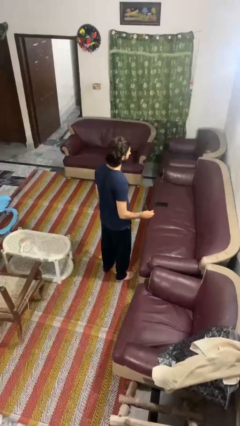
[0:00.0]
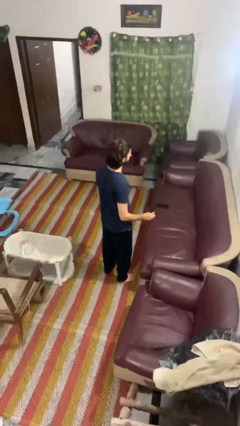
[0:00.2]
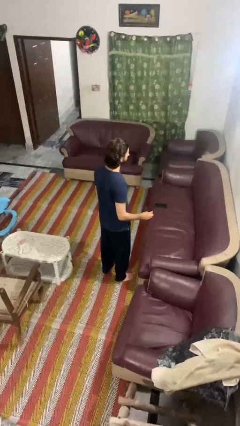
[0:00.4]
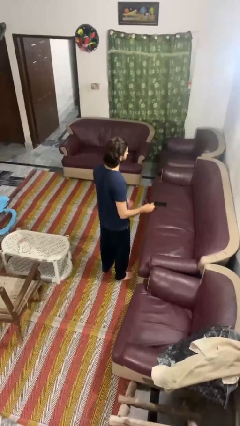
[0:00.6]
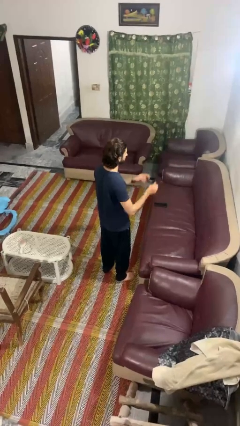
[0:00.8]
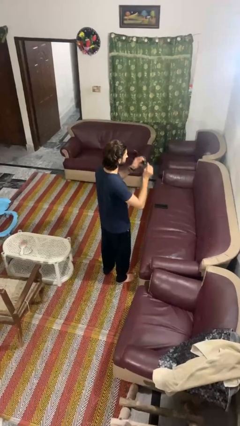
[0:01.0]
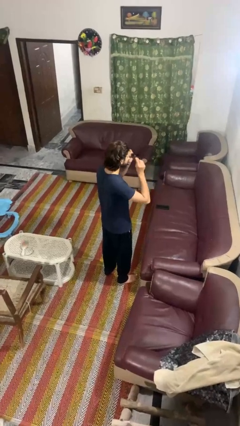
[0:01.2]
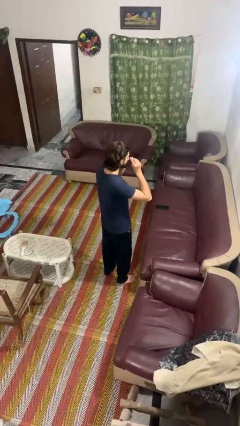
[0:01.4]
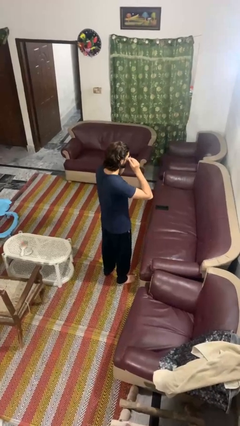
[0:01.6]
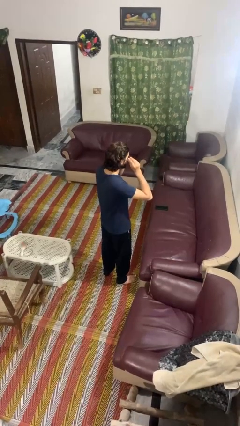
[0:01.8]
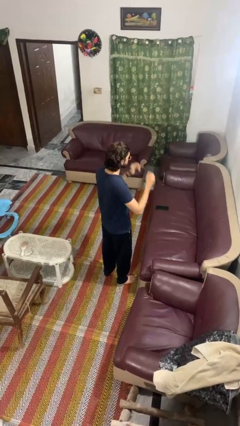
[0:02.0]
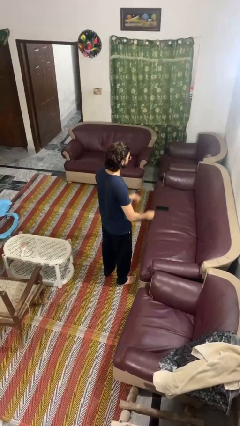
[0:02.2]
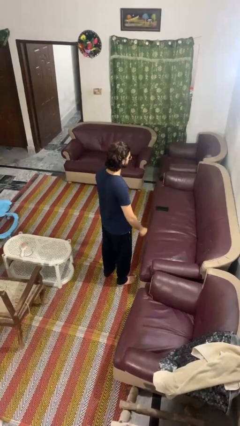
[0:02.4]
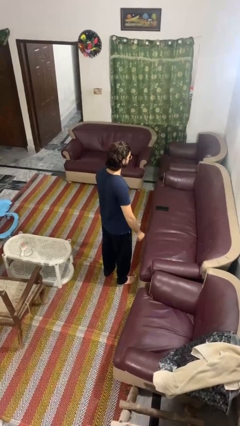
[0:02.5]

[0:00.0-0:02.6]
person puts on sunglasses

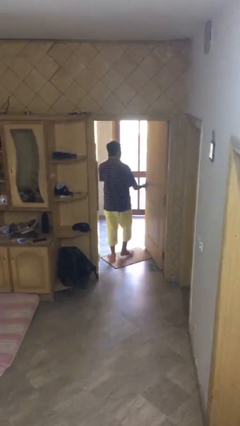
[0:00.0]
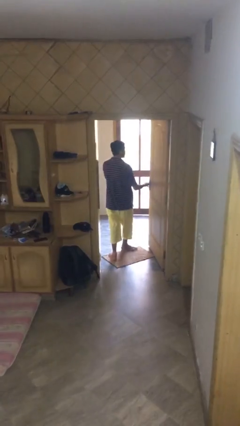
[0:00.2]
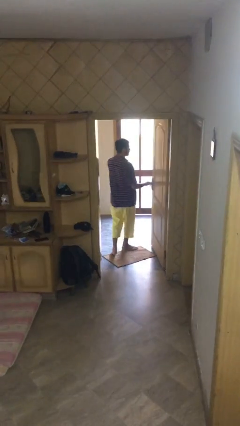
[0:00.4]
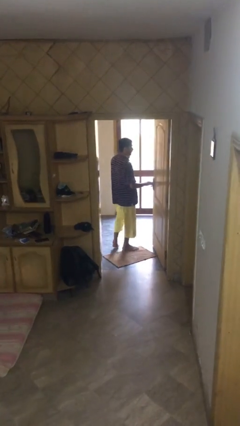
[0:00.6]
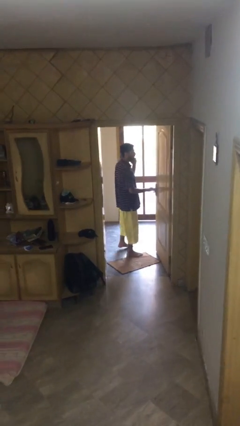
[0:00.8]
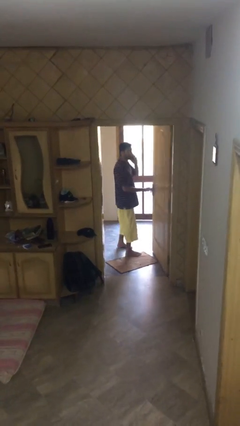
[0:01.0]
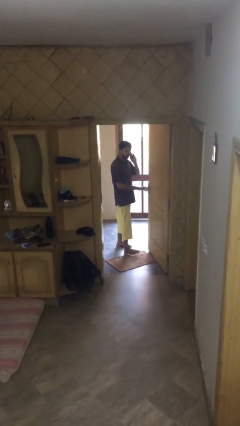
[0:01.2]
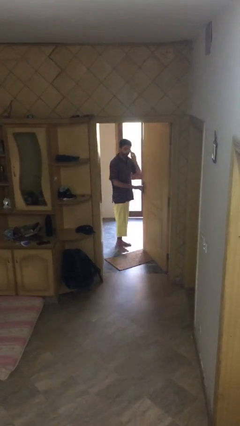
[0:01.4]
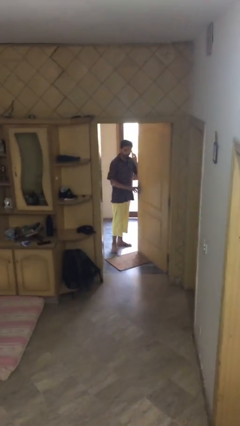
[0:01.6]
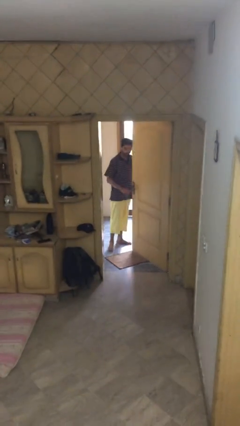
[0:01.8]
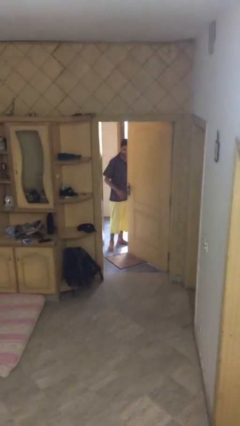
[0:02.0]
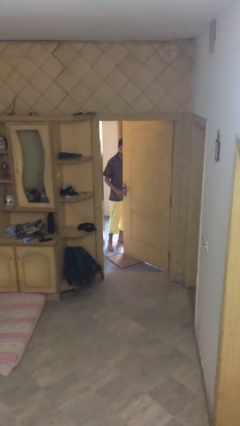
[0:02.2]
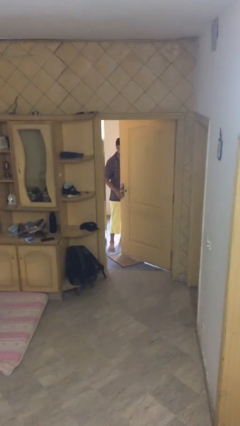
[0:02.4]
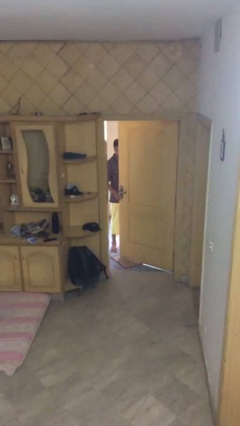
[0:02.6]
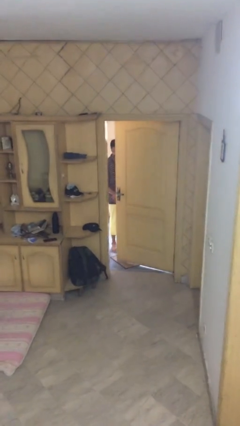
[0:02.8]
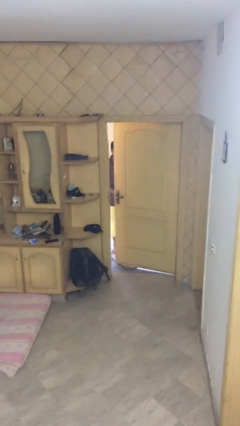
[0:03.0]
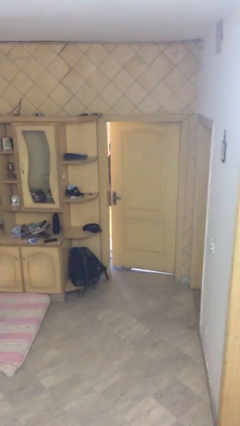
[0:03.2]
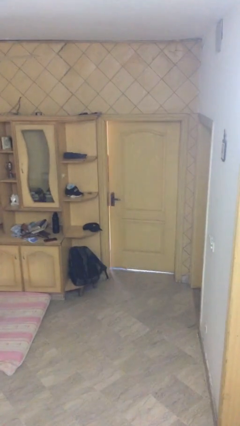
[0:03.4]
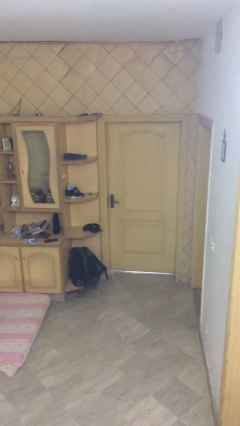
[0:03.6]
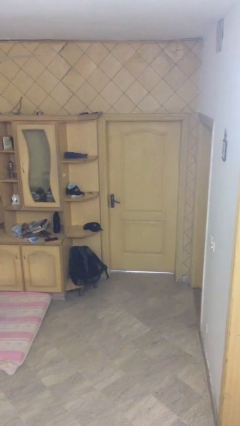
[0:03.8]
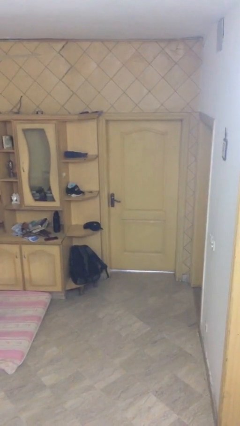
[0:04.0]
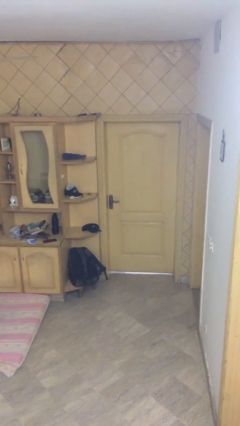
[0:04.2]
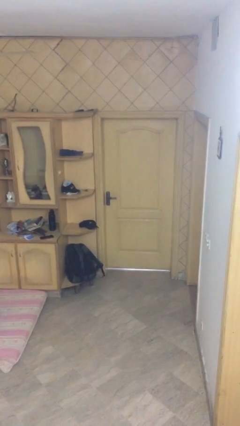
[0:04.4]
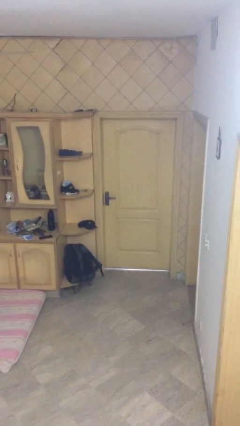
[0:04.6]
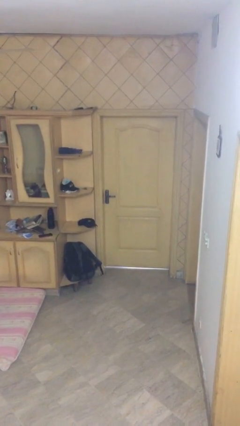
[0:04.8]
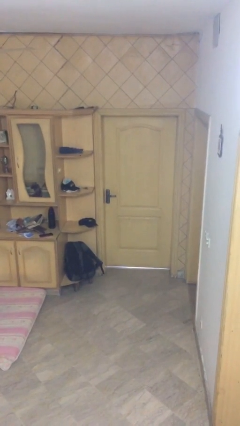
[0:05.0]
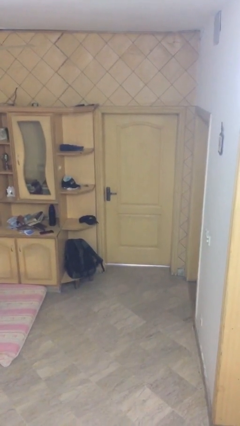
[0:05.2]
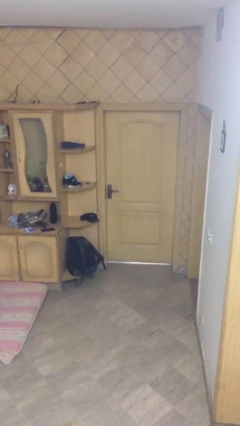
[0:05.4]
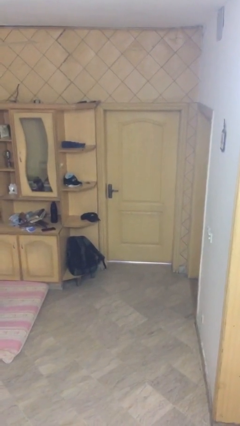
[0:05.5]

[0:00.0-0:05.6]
person closes facility door

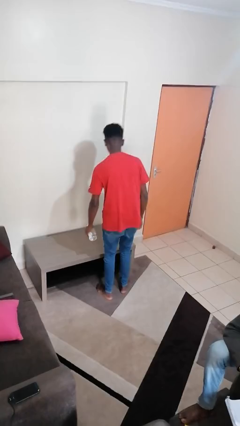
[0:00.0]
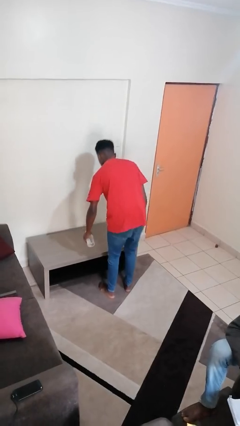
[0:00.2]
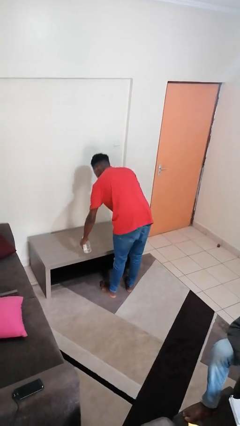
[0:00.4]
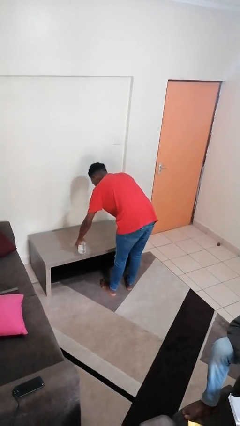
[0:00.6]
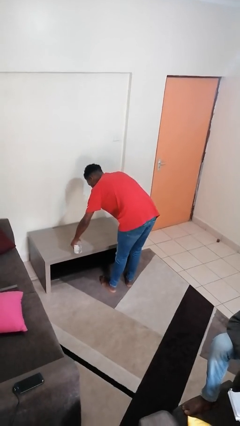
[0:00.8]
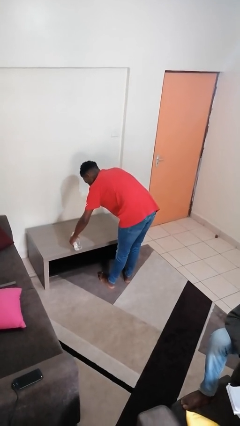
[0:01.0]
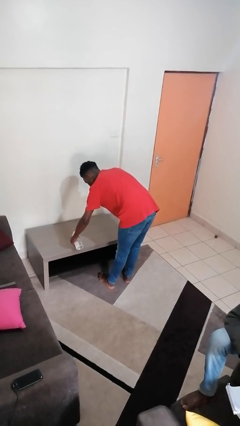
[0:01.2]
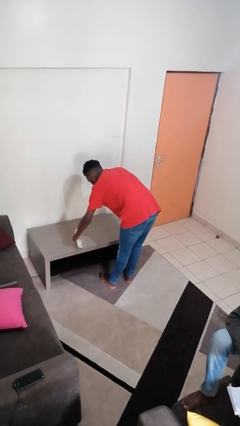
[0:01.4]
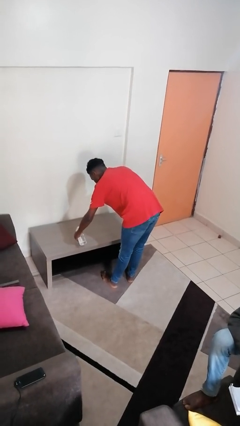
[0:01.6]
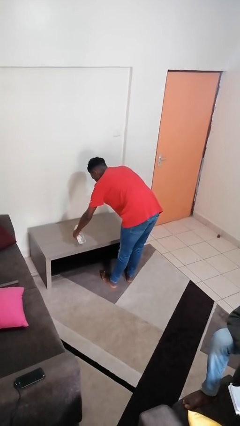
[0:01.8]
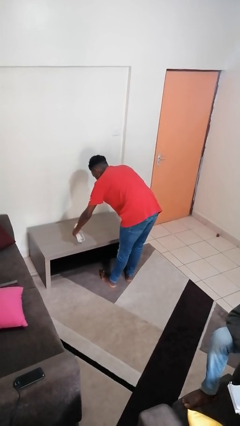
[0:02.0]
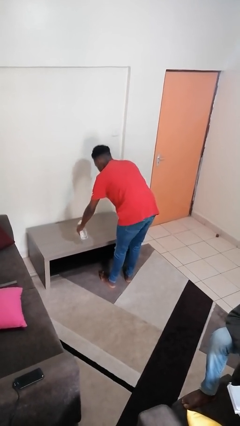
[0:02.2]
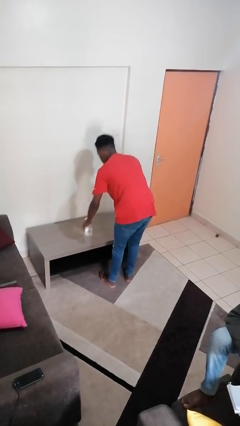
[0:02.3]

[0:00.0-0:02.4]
person sprays from bottle

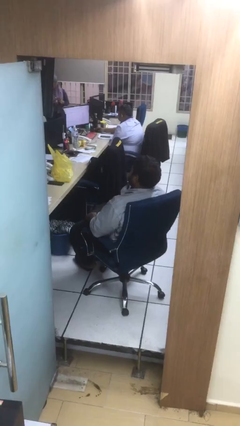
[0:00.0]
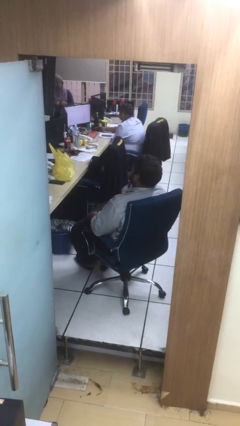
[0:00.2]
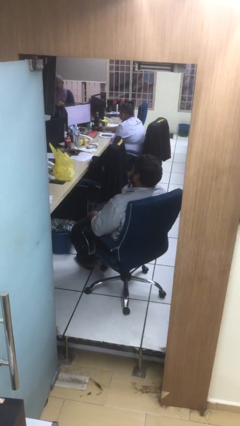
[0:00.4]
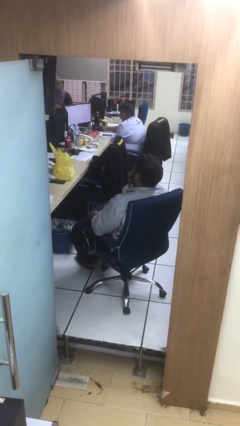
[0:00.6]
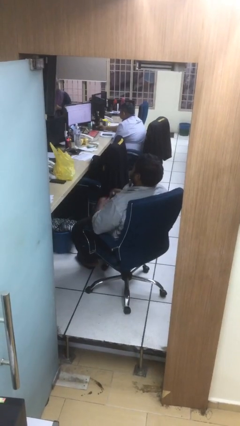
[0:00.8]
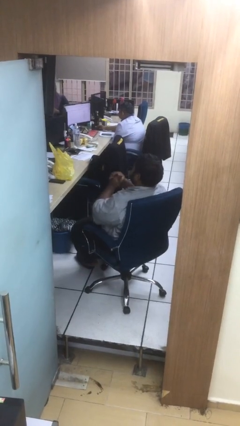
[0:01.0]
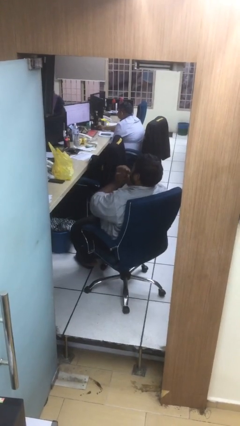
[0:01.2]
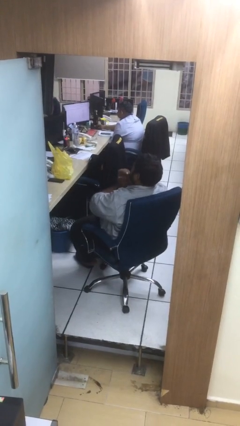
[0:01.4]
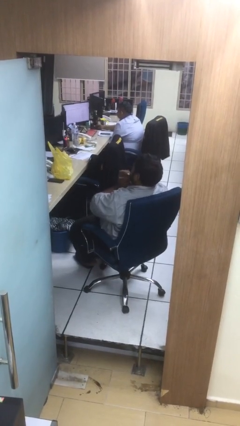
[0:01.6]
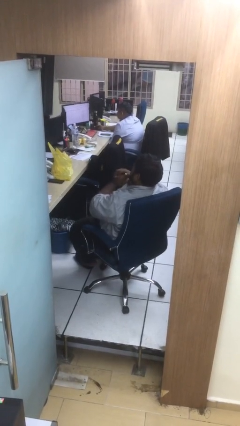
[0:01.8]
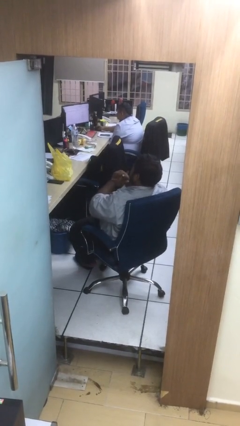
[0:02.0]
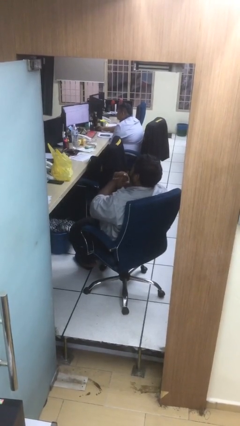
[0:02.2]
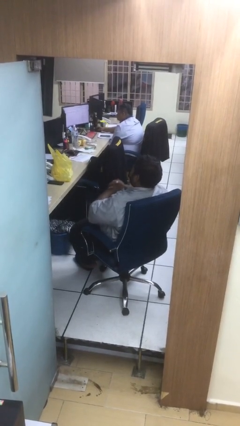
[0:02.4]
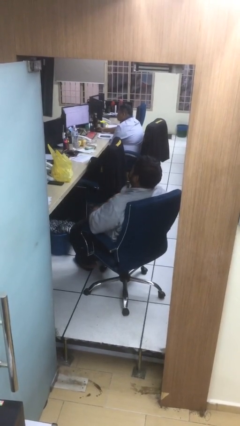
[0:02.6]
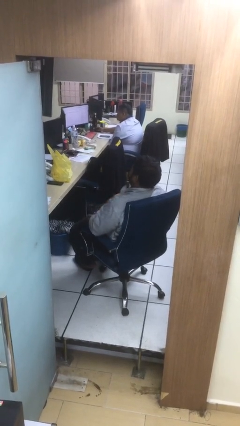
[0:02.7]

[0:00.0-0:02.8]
person cracks knuckles

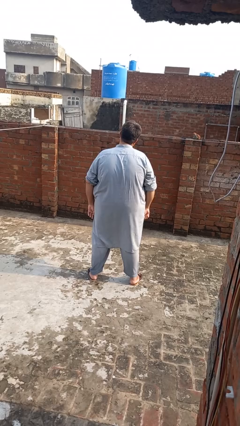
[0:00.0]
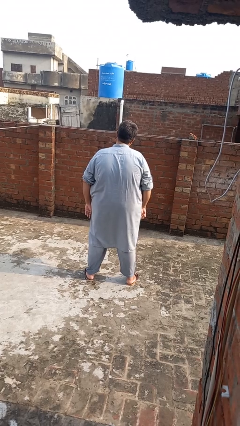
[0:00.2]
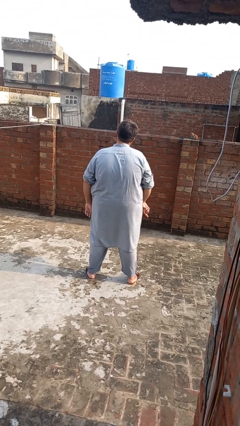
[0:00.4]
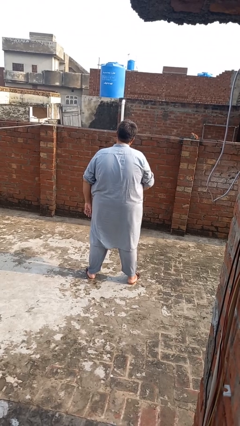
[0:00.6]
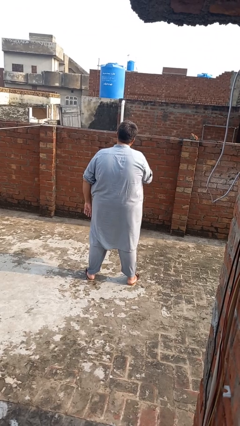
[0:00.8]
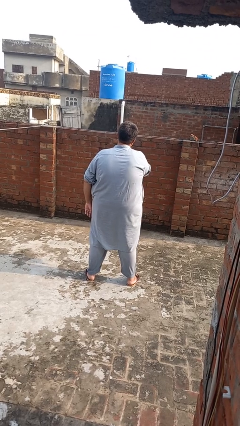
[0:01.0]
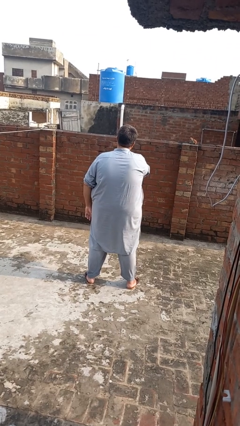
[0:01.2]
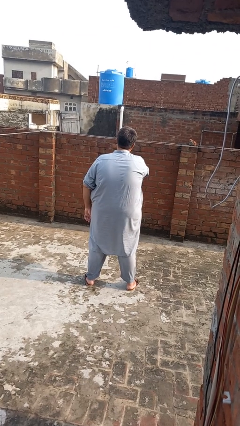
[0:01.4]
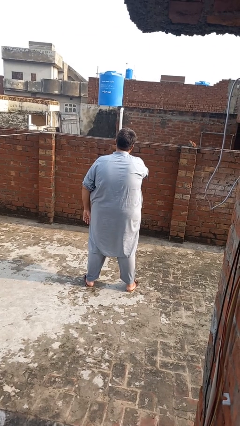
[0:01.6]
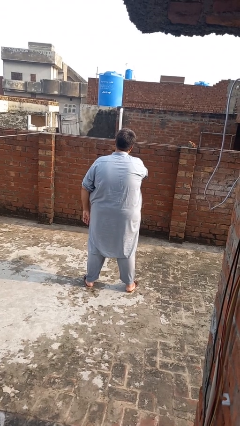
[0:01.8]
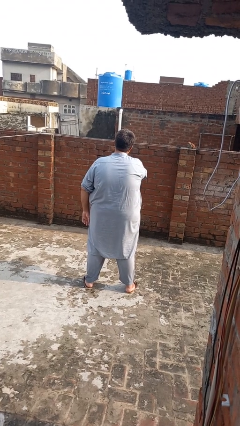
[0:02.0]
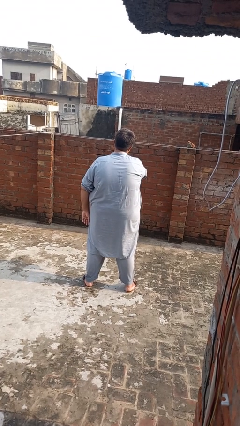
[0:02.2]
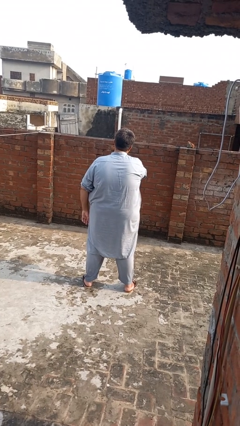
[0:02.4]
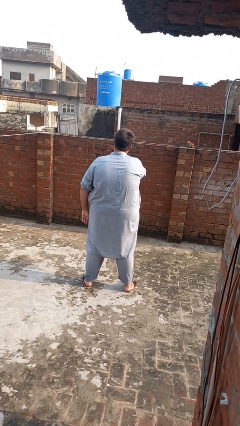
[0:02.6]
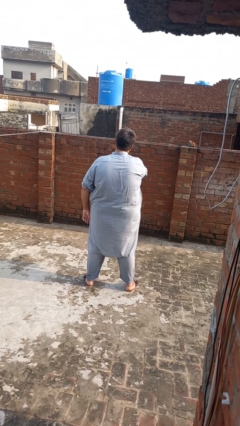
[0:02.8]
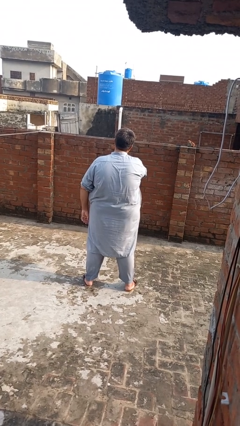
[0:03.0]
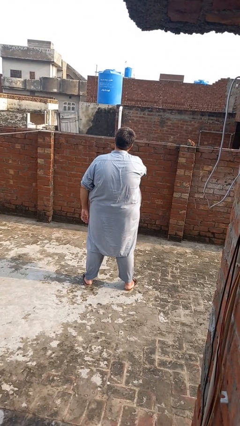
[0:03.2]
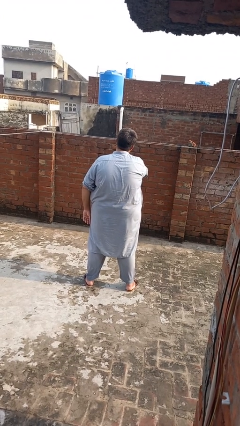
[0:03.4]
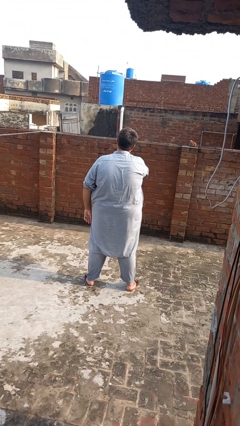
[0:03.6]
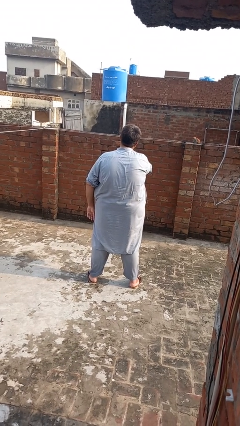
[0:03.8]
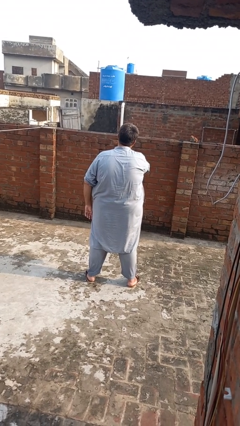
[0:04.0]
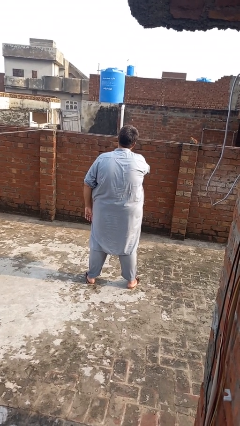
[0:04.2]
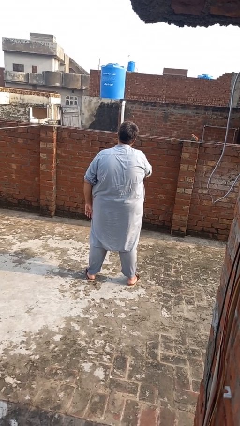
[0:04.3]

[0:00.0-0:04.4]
person gestures be quiet
